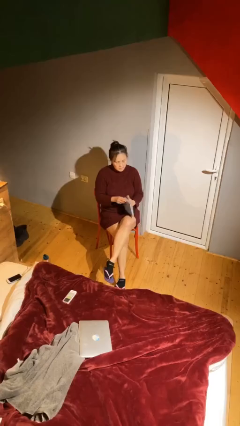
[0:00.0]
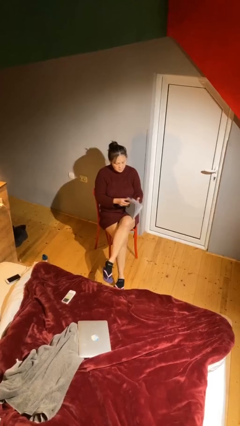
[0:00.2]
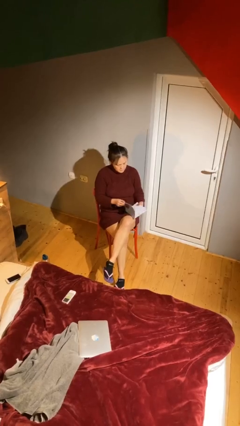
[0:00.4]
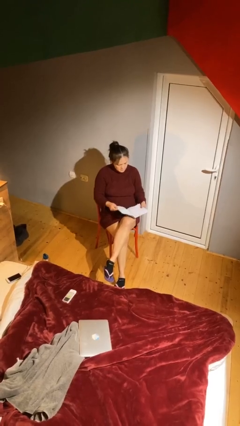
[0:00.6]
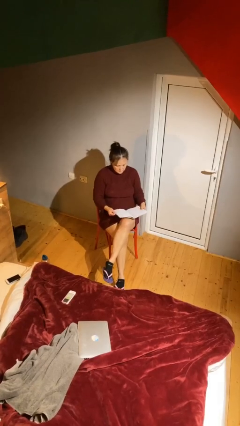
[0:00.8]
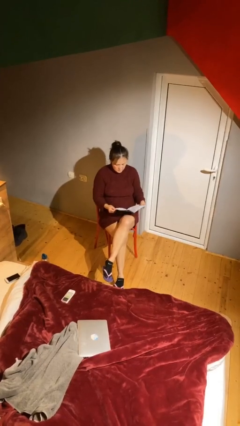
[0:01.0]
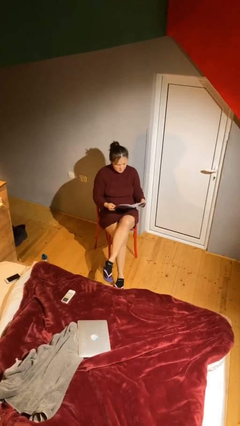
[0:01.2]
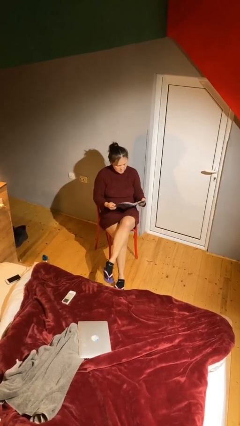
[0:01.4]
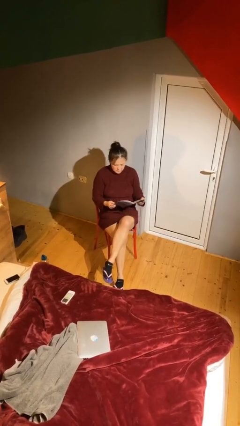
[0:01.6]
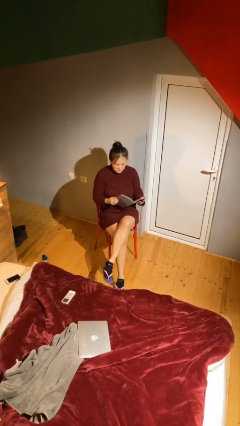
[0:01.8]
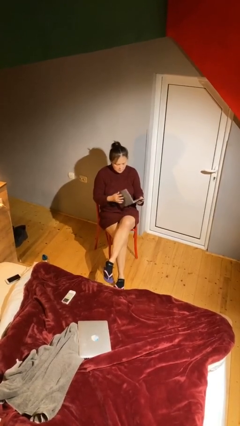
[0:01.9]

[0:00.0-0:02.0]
person reads document

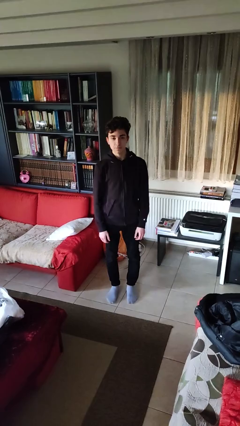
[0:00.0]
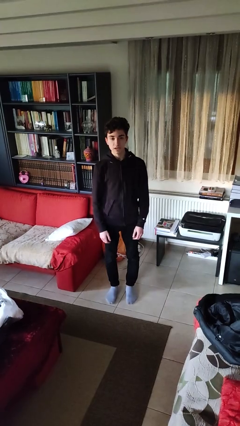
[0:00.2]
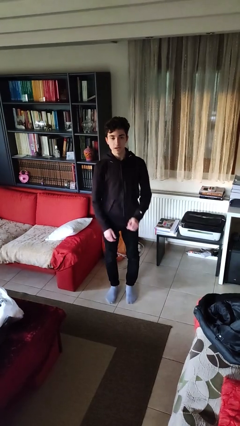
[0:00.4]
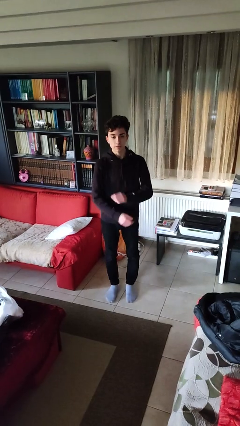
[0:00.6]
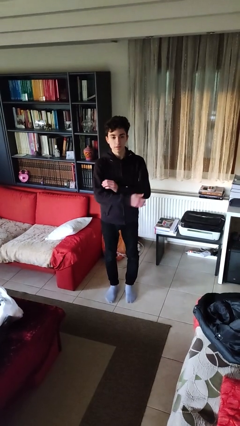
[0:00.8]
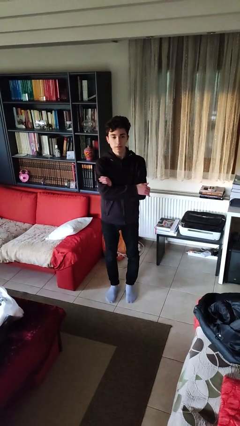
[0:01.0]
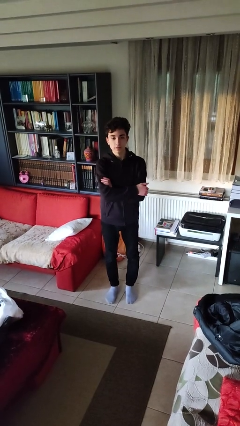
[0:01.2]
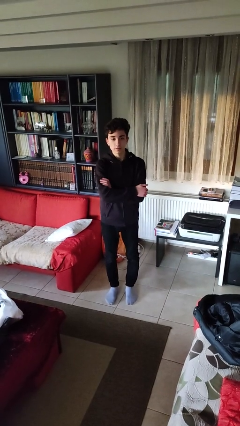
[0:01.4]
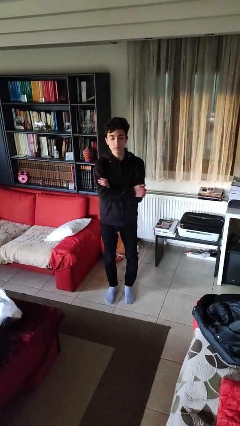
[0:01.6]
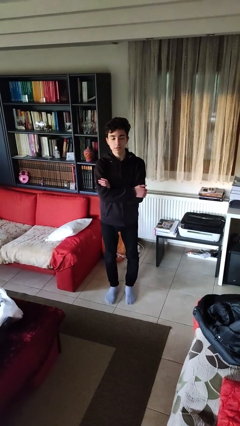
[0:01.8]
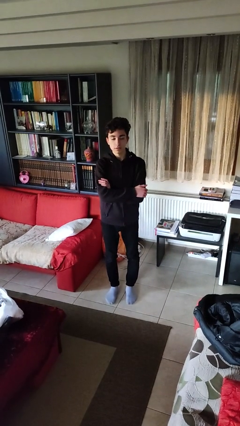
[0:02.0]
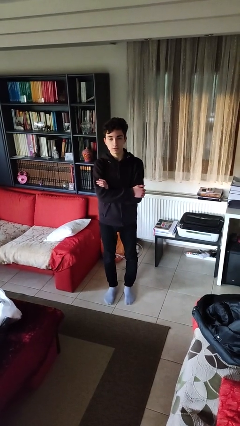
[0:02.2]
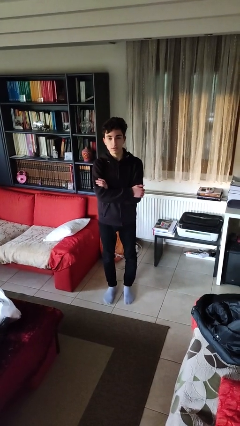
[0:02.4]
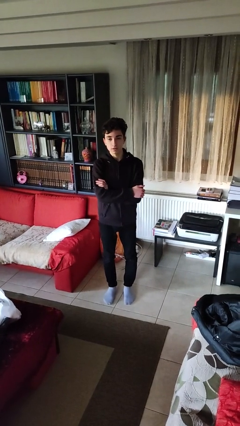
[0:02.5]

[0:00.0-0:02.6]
person crosses arms

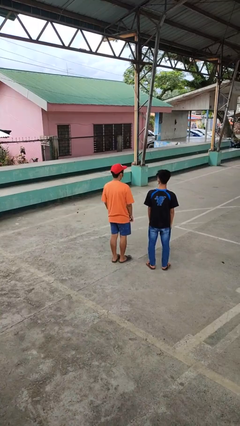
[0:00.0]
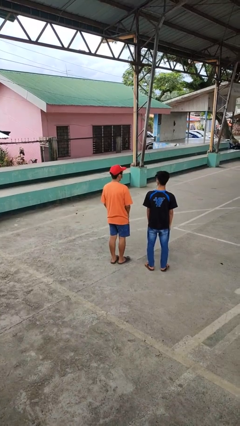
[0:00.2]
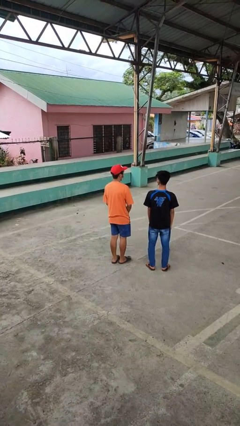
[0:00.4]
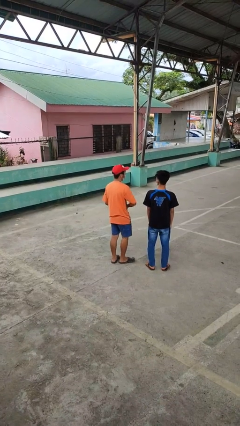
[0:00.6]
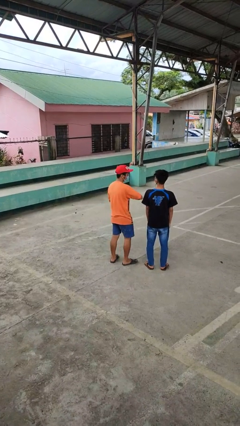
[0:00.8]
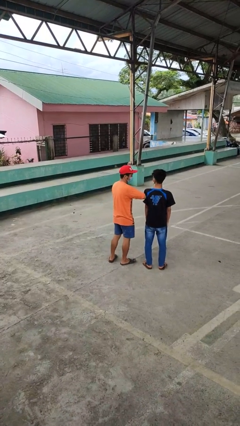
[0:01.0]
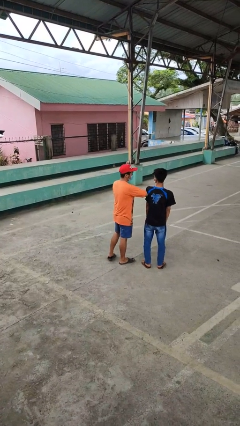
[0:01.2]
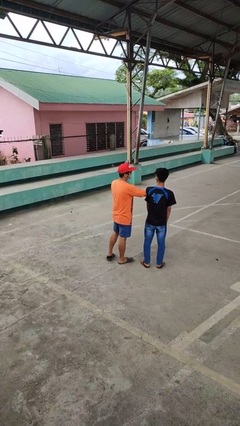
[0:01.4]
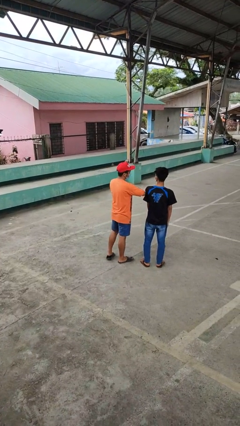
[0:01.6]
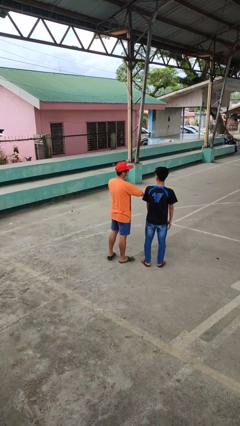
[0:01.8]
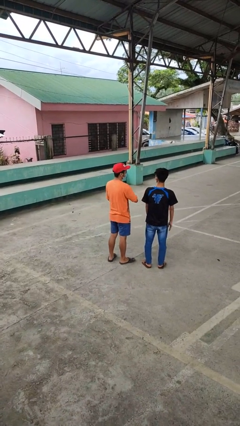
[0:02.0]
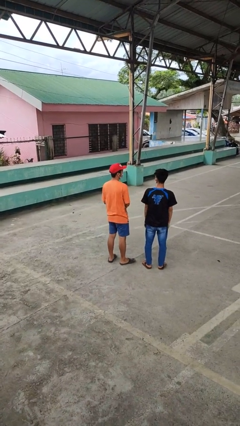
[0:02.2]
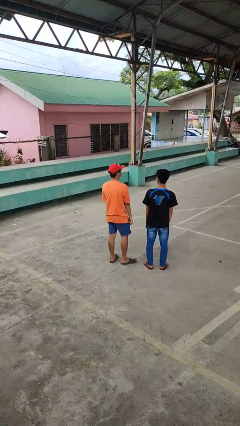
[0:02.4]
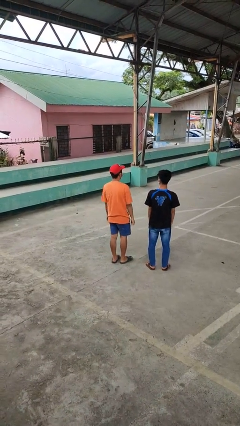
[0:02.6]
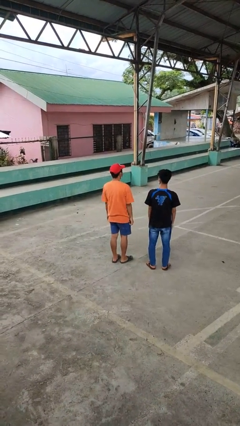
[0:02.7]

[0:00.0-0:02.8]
person nudges person with elbow

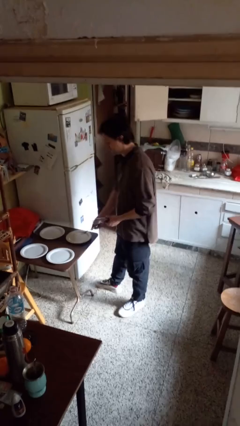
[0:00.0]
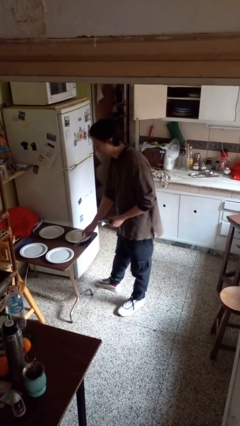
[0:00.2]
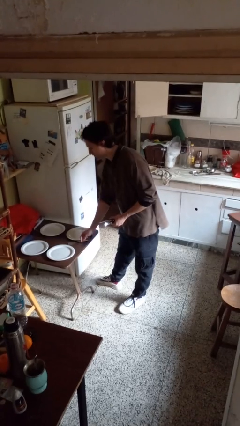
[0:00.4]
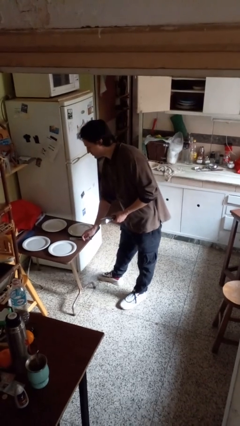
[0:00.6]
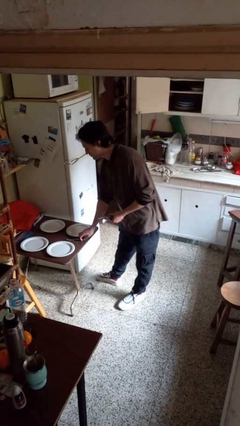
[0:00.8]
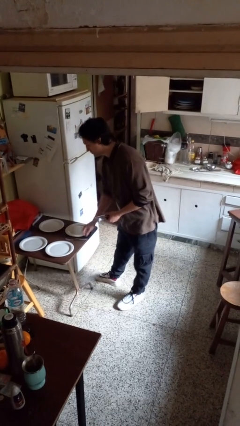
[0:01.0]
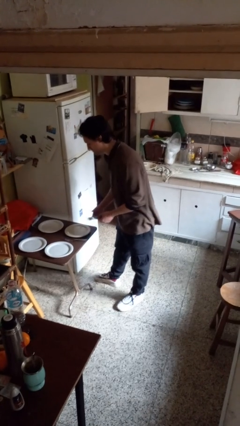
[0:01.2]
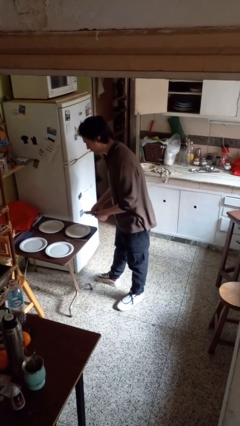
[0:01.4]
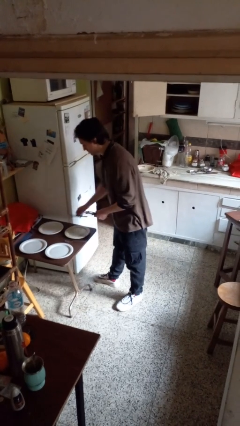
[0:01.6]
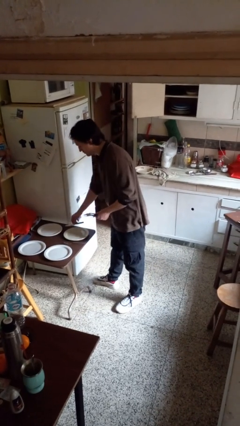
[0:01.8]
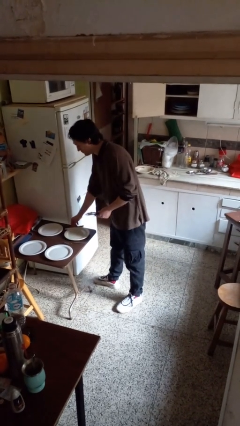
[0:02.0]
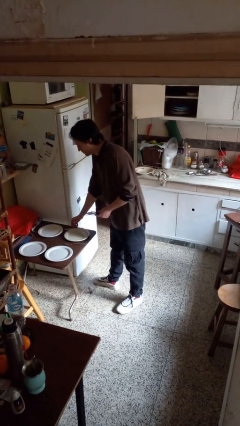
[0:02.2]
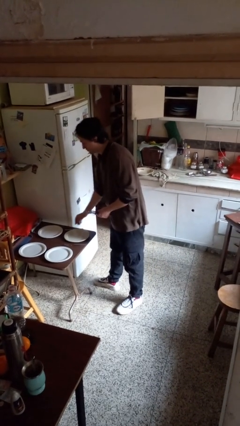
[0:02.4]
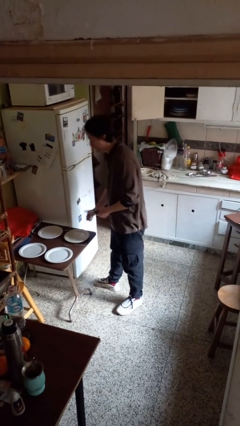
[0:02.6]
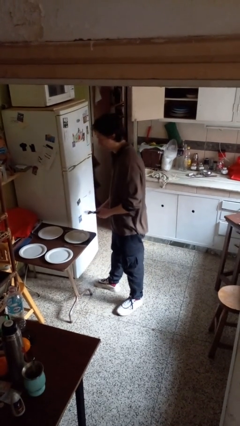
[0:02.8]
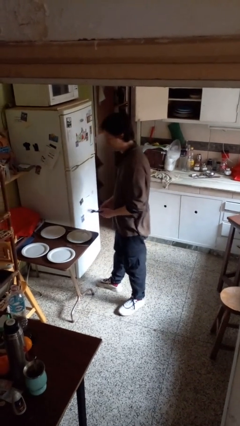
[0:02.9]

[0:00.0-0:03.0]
person sets table

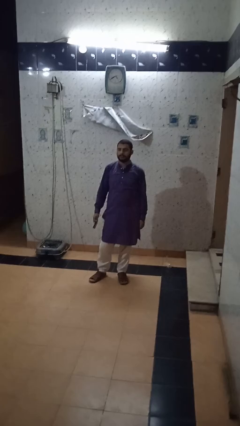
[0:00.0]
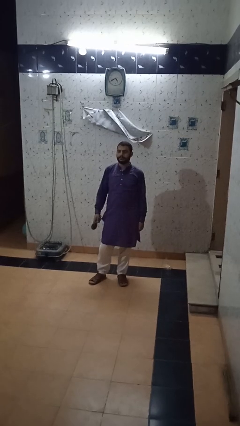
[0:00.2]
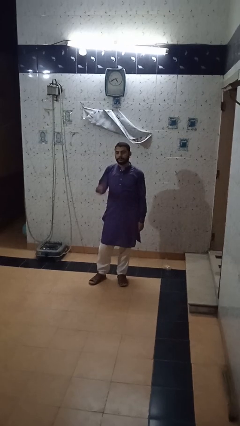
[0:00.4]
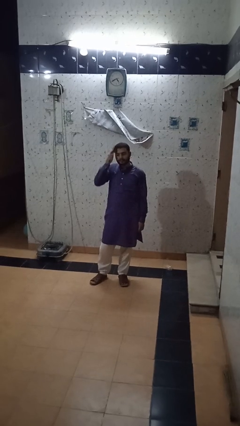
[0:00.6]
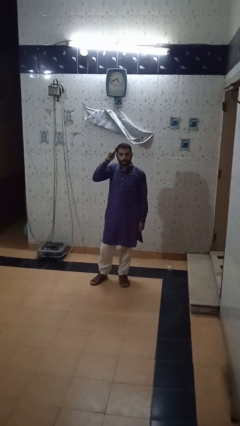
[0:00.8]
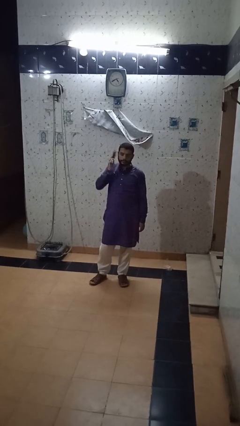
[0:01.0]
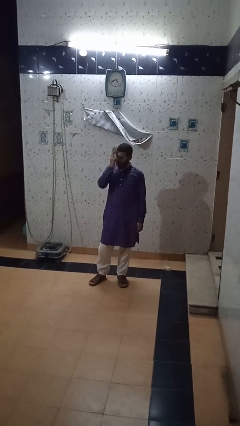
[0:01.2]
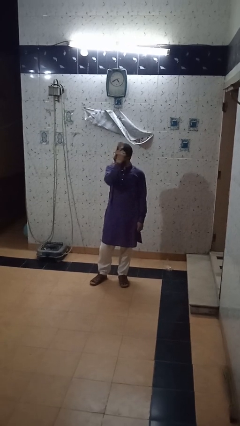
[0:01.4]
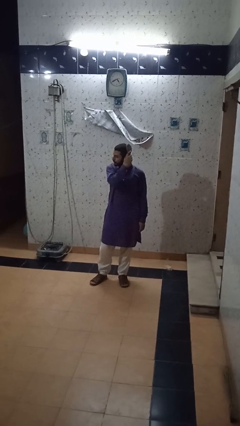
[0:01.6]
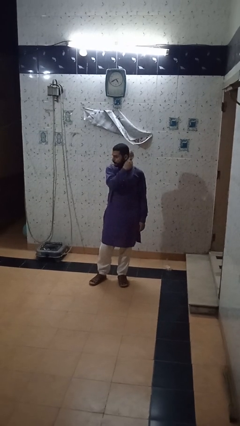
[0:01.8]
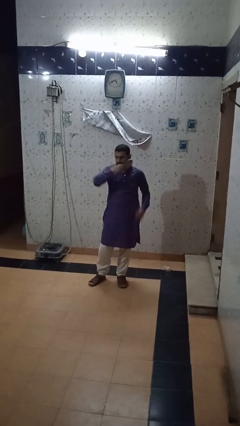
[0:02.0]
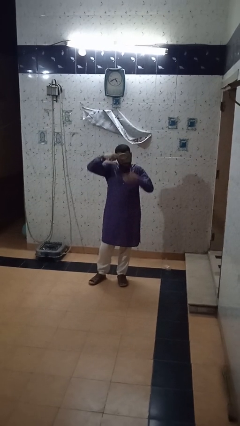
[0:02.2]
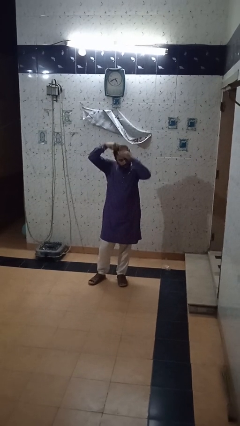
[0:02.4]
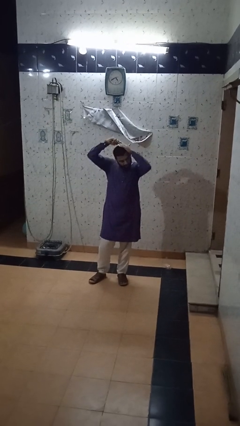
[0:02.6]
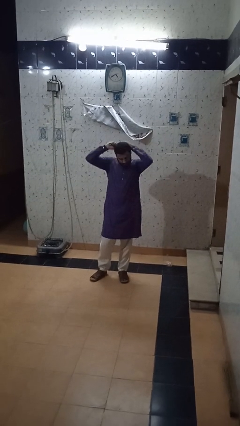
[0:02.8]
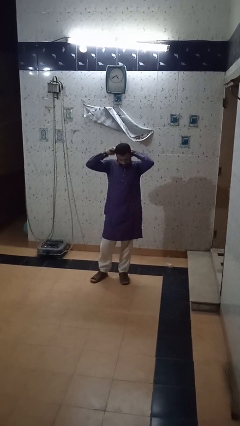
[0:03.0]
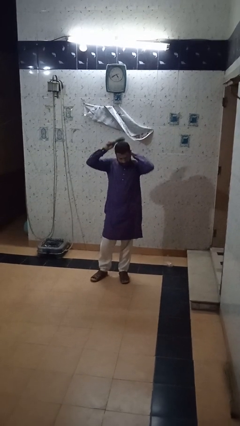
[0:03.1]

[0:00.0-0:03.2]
person brushes hair

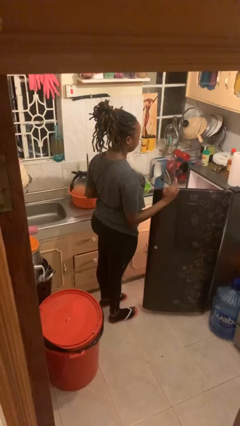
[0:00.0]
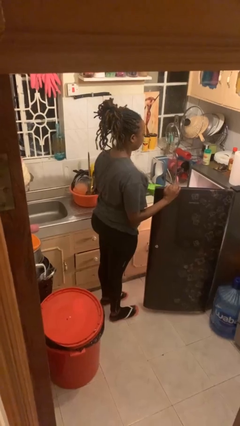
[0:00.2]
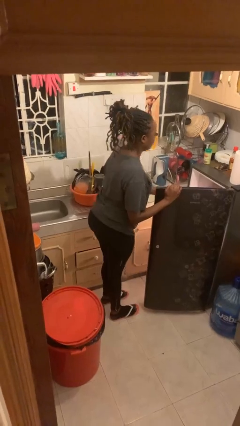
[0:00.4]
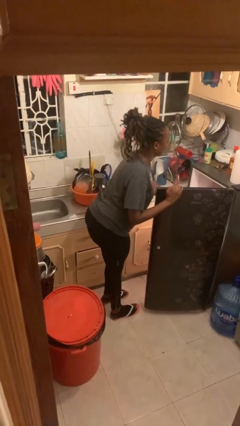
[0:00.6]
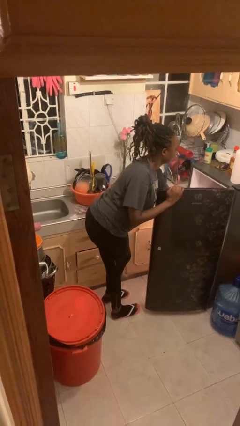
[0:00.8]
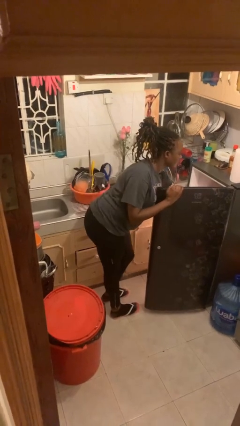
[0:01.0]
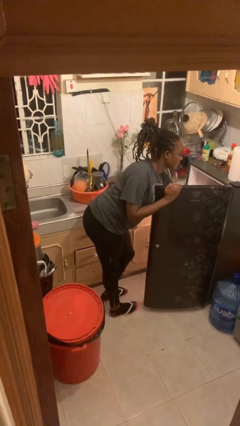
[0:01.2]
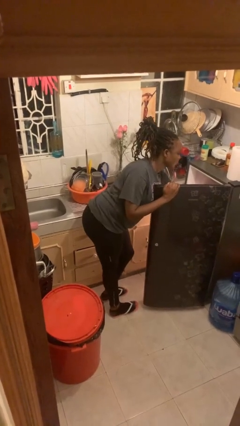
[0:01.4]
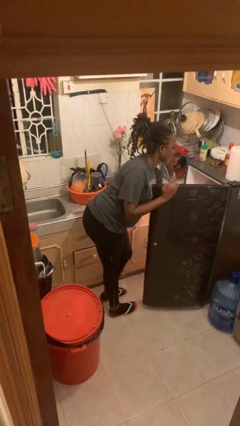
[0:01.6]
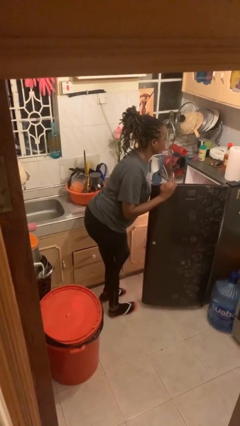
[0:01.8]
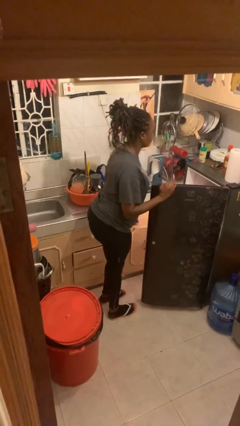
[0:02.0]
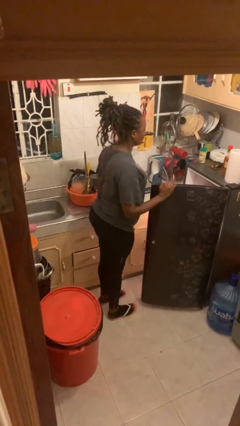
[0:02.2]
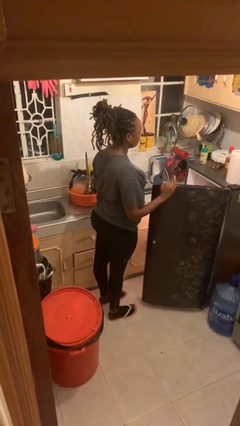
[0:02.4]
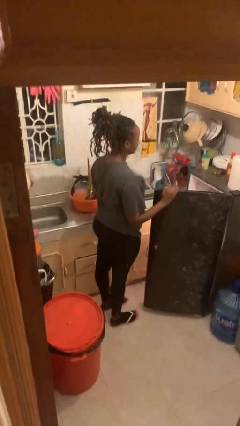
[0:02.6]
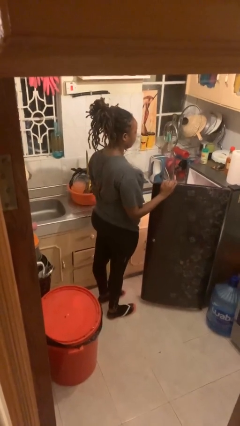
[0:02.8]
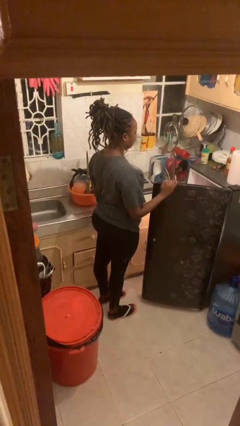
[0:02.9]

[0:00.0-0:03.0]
person puts object into refrigerator

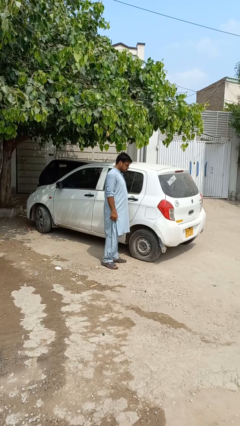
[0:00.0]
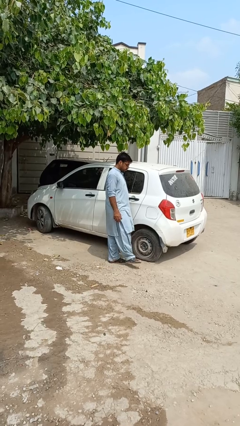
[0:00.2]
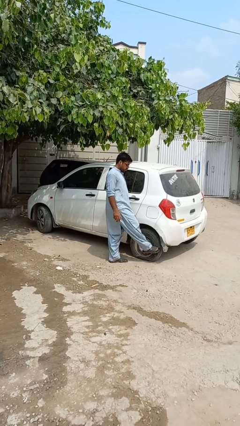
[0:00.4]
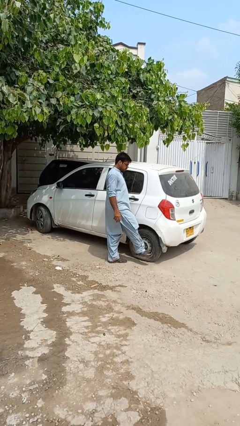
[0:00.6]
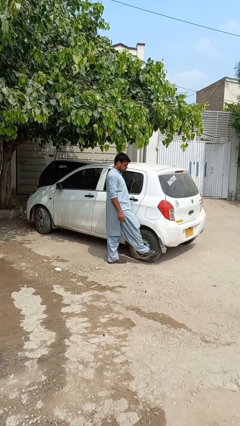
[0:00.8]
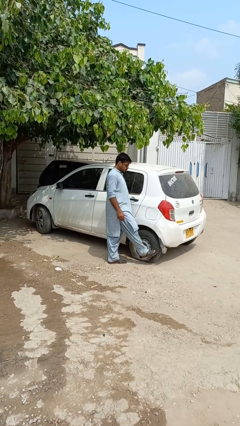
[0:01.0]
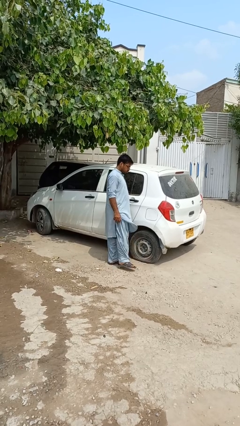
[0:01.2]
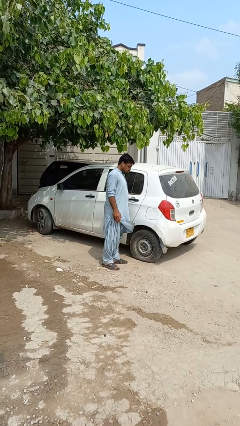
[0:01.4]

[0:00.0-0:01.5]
person kicks car tires
